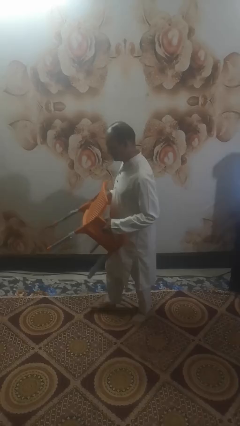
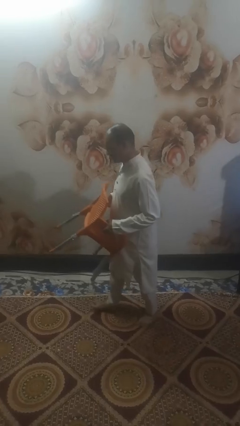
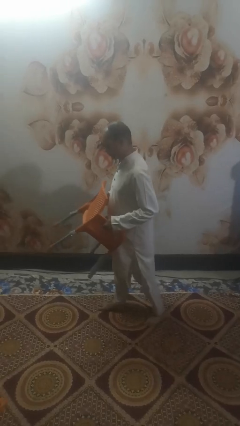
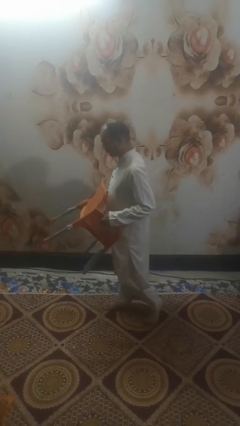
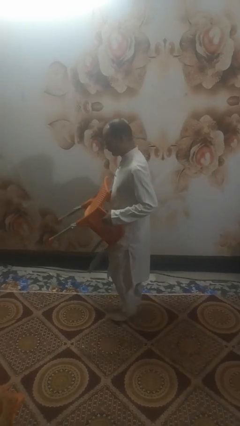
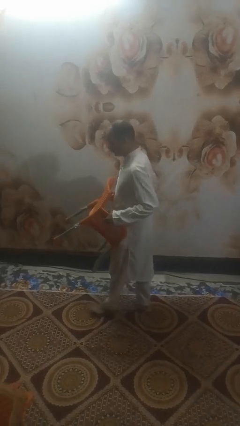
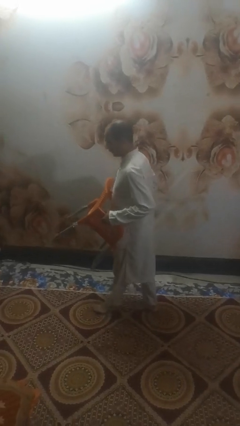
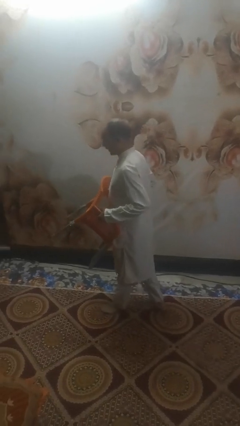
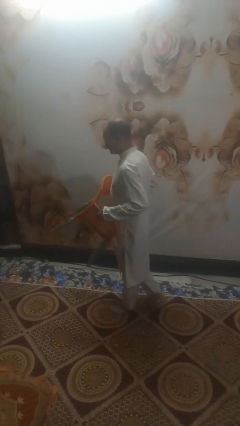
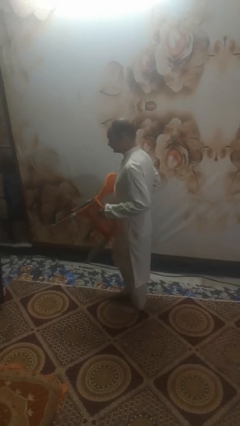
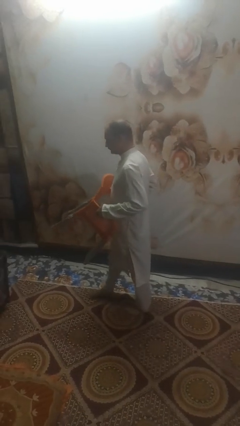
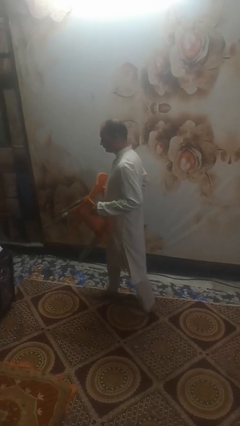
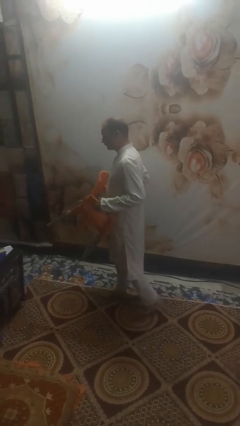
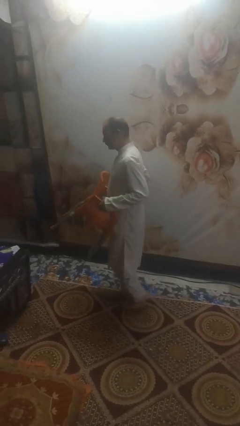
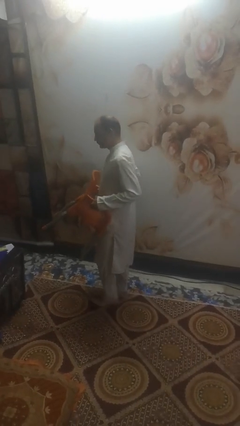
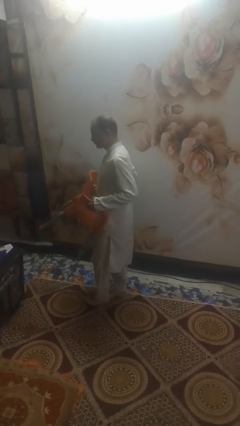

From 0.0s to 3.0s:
person carries furniture

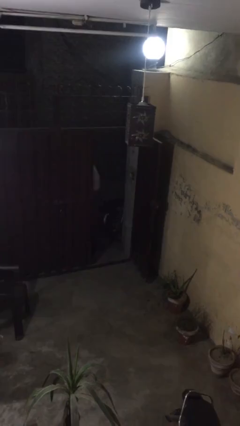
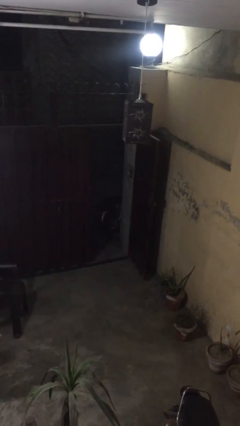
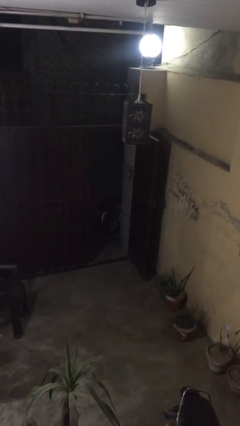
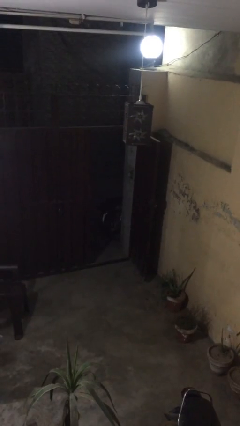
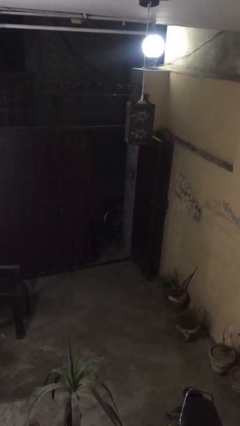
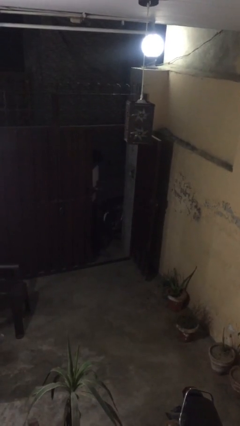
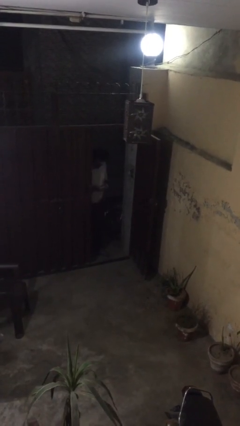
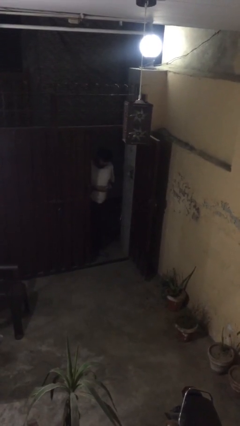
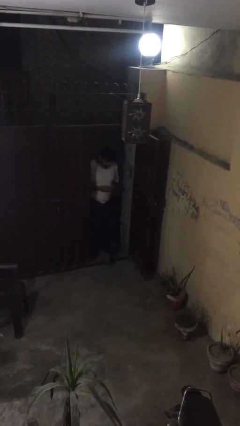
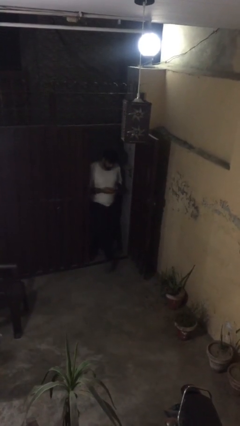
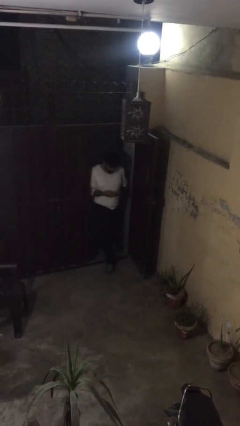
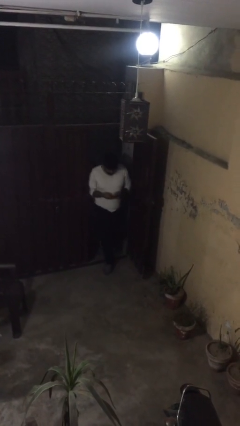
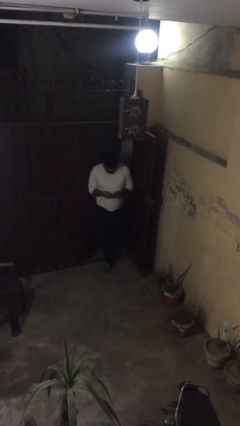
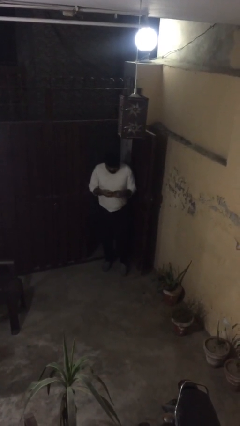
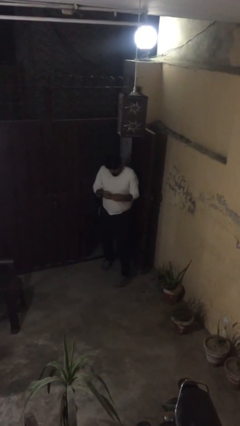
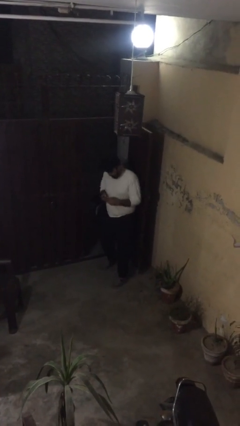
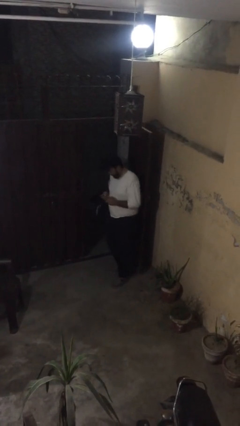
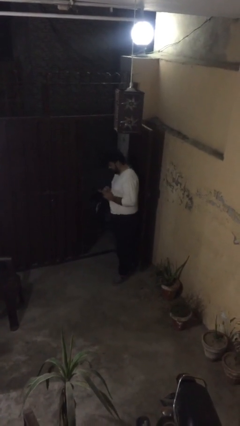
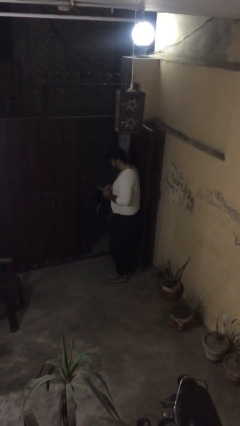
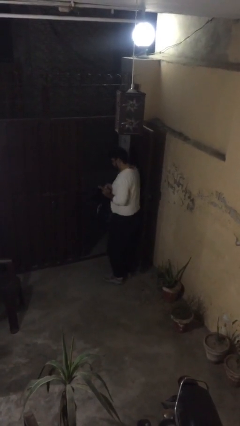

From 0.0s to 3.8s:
person enters scene through structure

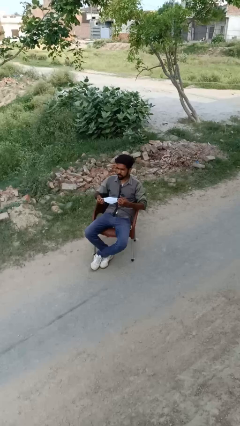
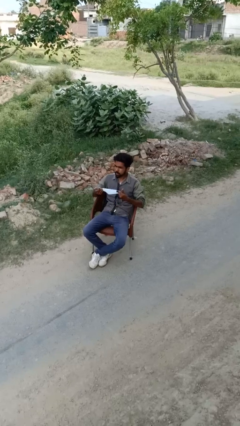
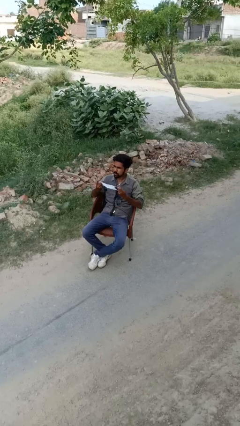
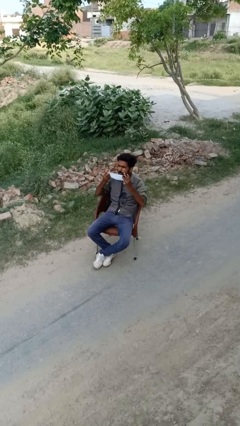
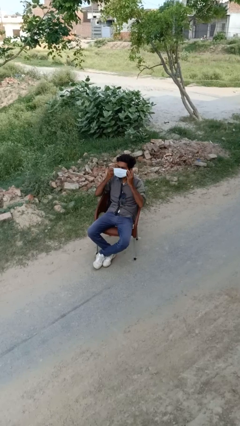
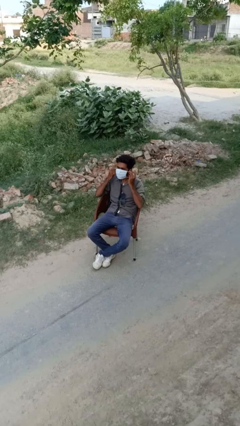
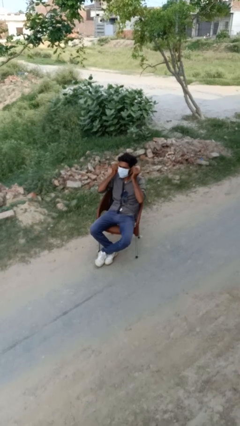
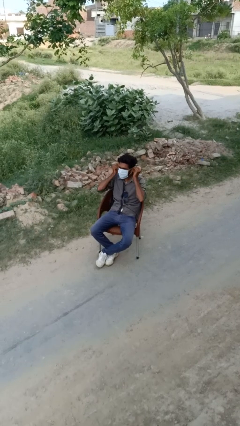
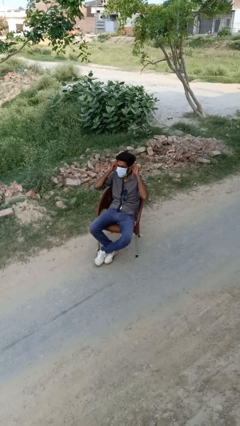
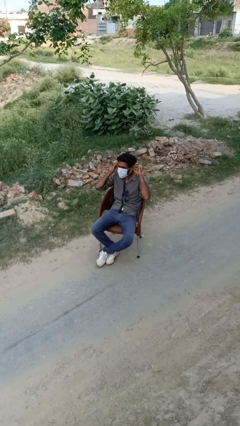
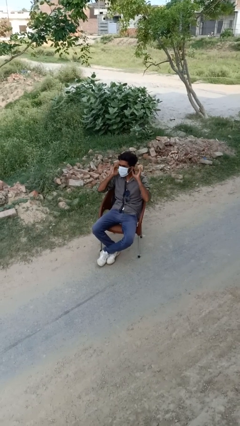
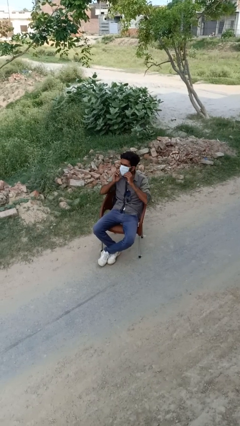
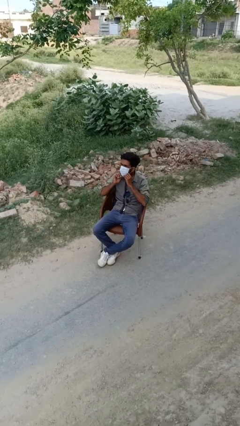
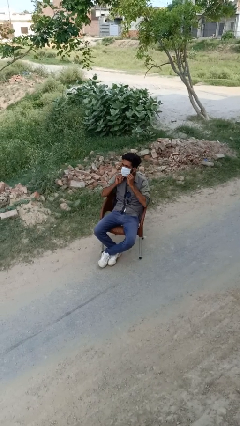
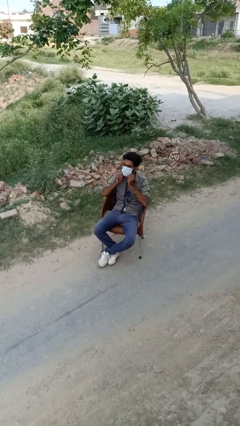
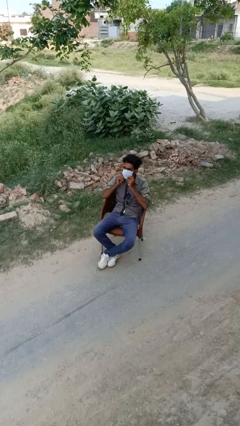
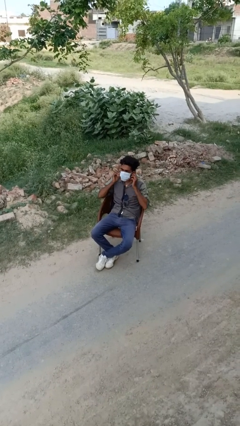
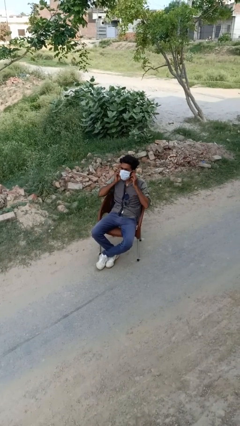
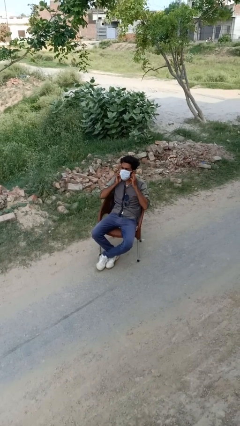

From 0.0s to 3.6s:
person puts on facemask

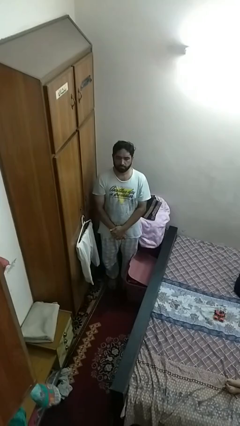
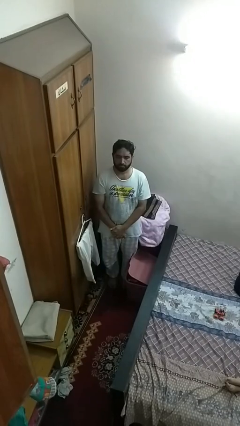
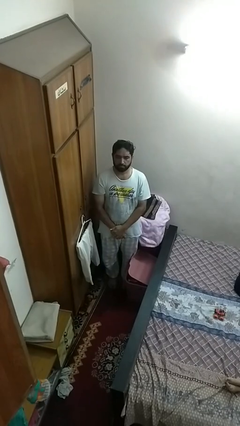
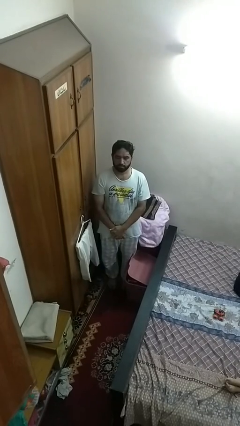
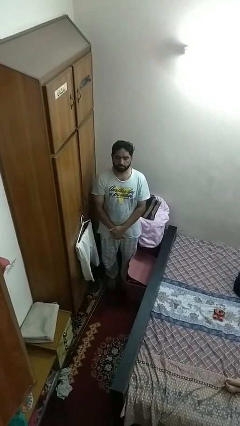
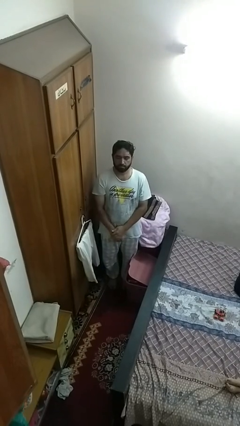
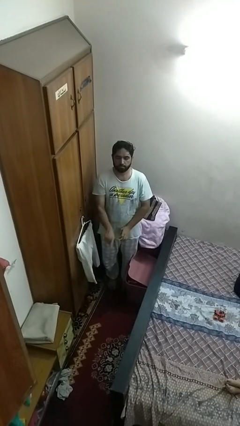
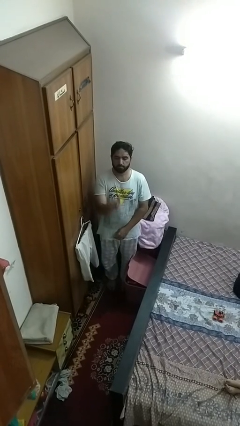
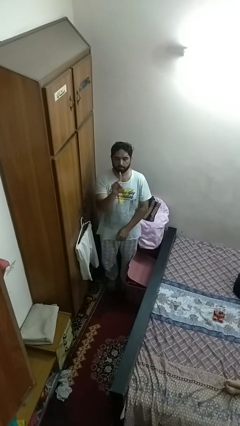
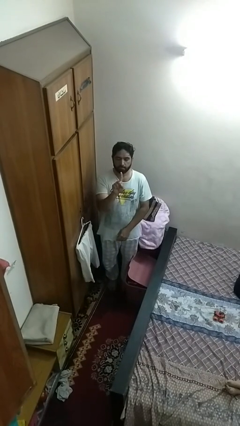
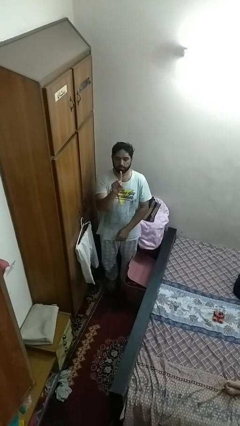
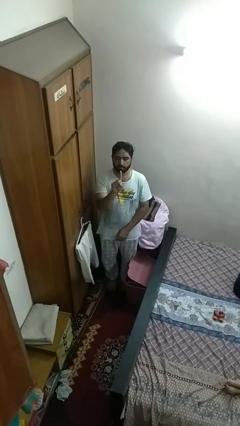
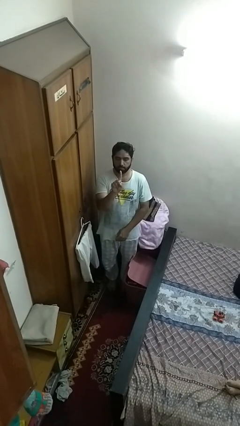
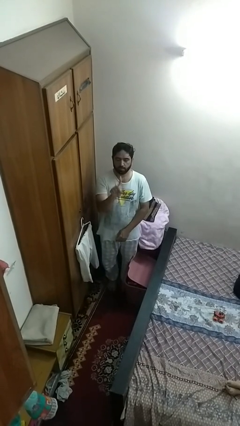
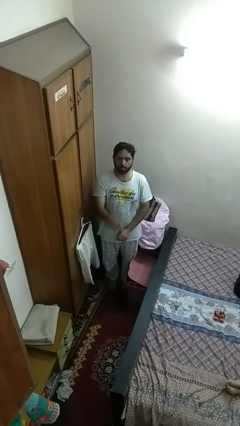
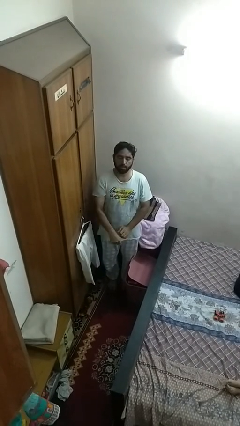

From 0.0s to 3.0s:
person gestures number one

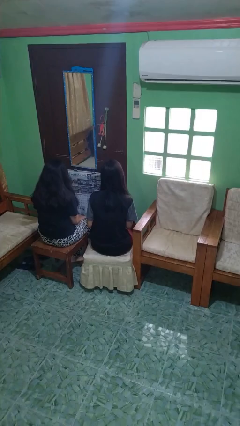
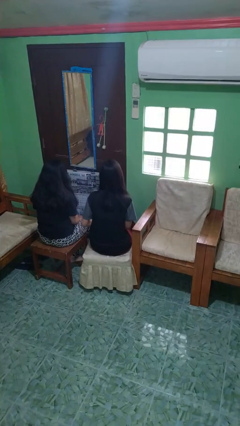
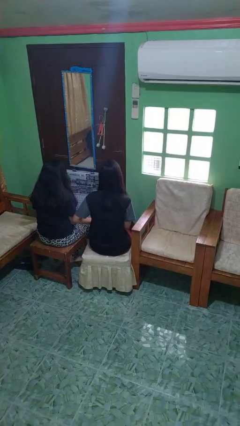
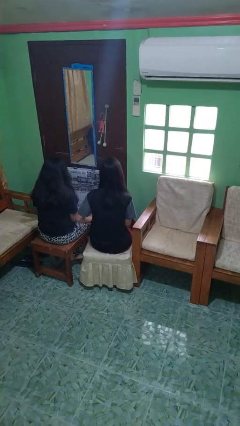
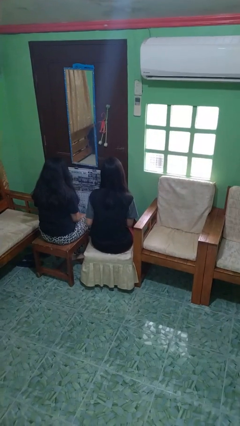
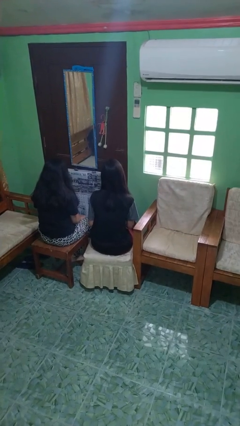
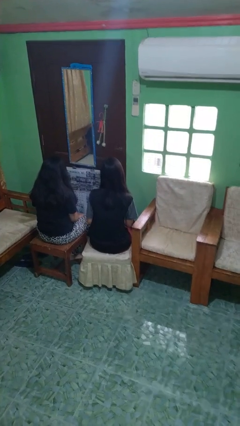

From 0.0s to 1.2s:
person nudges person with elbow

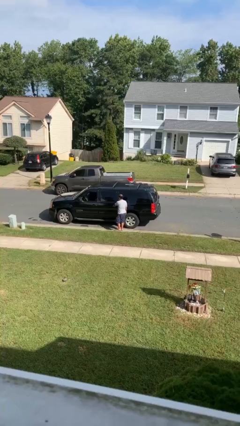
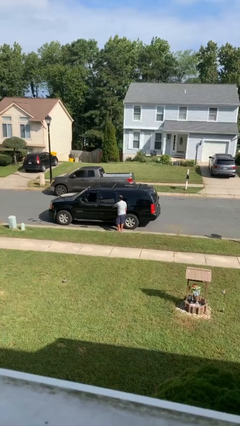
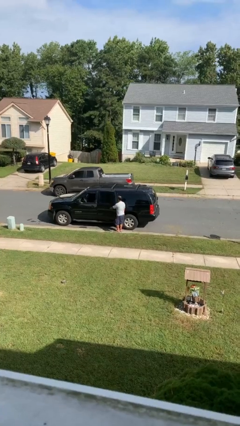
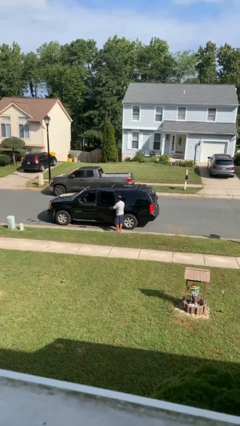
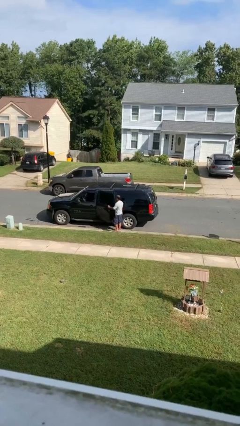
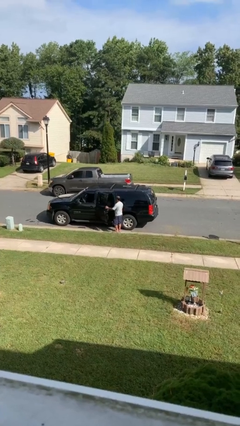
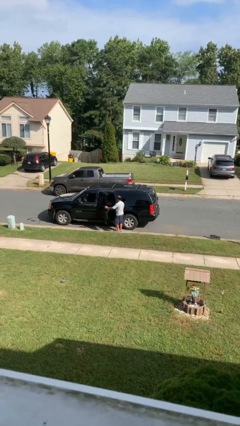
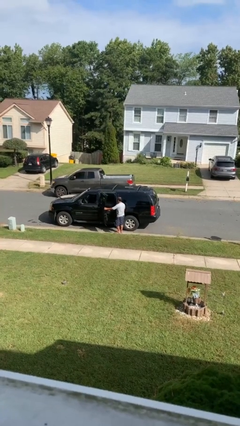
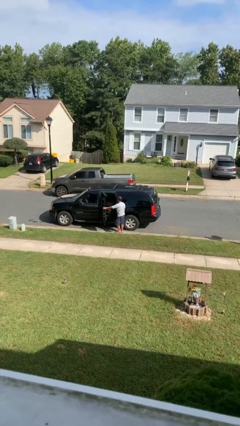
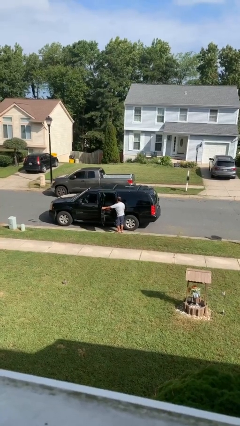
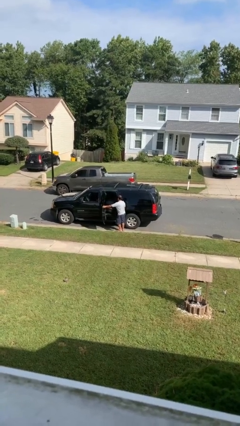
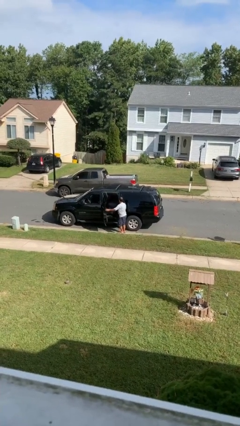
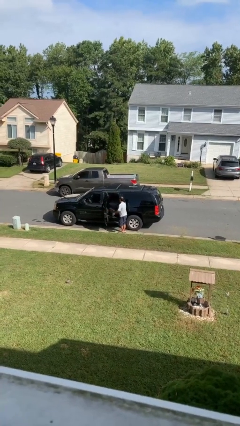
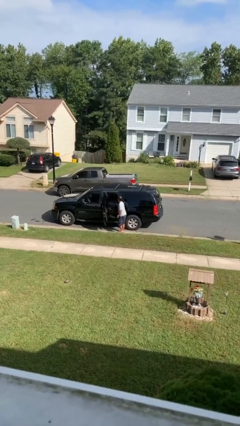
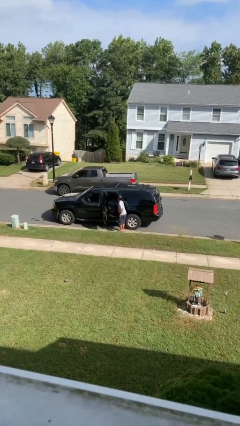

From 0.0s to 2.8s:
person opens car door
